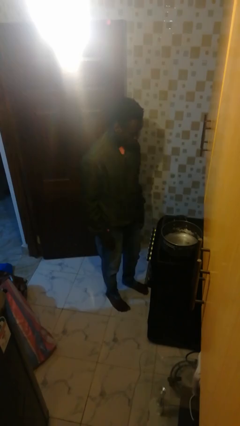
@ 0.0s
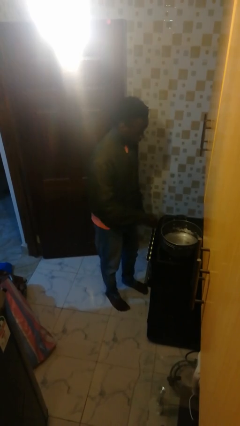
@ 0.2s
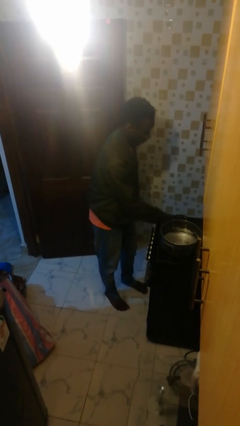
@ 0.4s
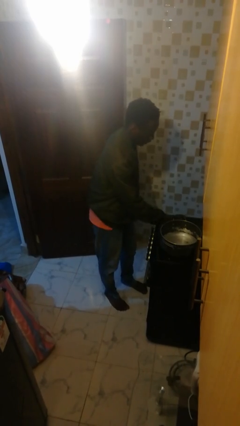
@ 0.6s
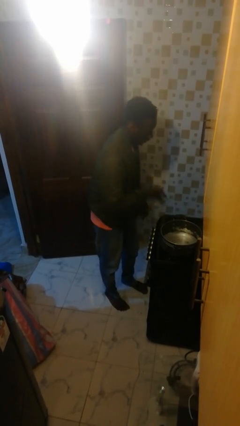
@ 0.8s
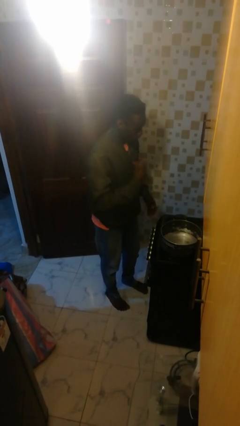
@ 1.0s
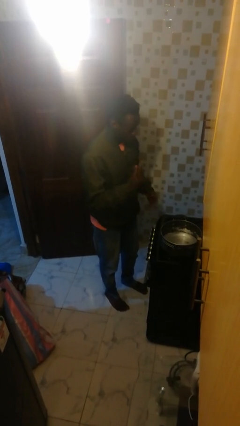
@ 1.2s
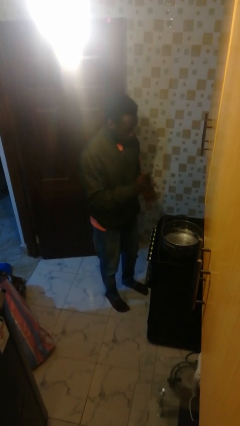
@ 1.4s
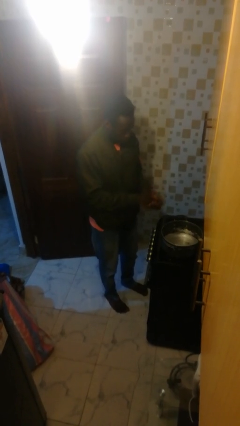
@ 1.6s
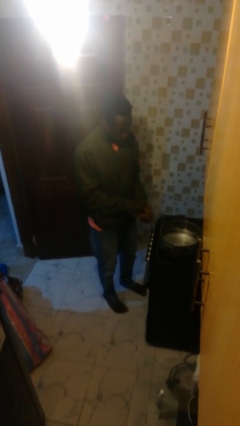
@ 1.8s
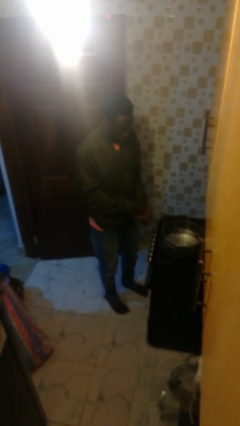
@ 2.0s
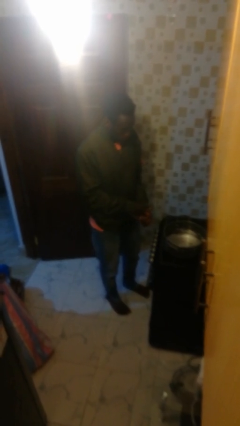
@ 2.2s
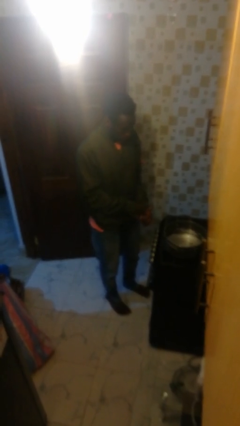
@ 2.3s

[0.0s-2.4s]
person burns hand

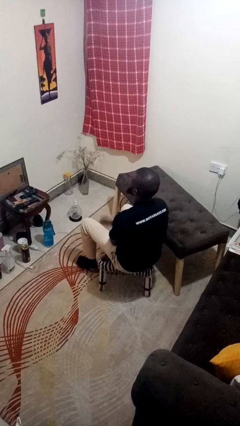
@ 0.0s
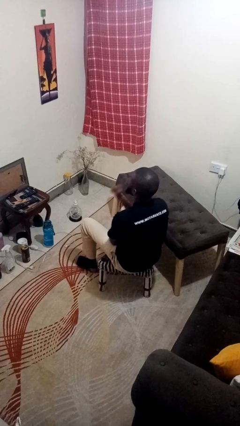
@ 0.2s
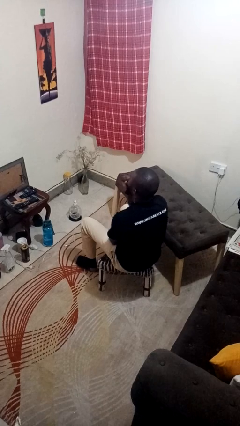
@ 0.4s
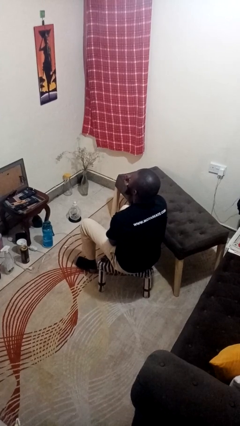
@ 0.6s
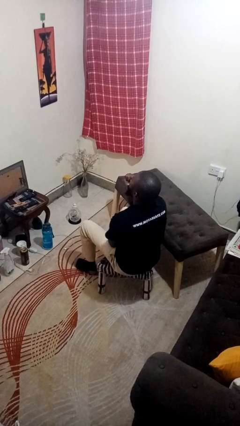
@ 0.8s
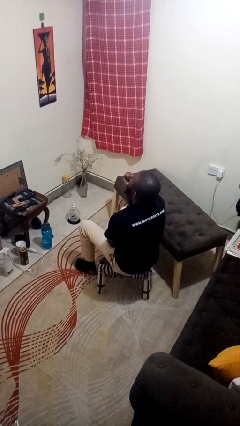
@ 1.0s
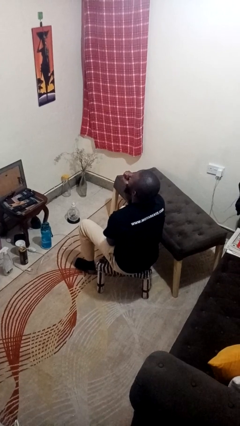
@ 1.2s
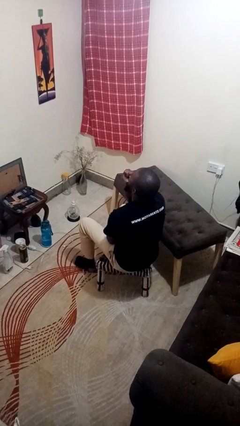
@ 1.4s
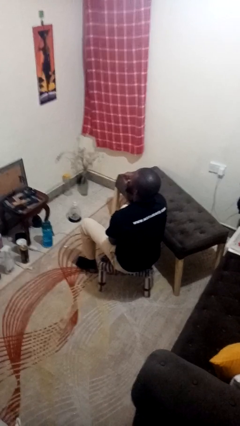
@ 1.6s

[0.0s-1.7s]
person yawns

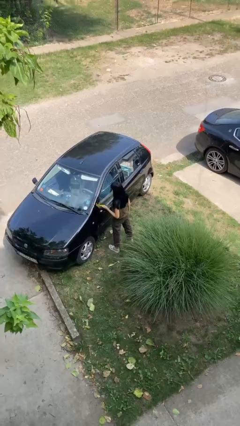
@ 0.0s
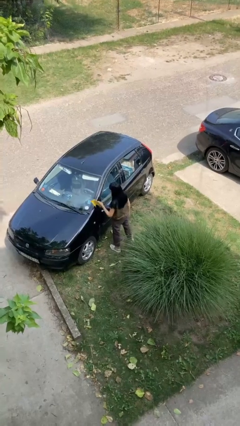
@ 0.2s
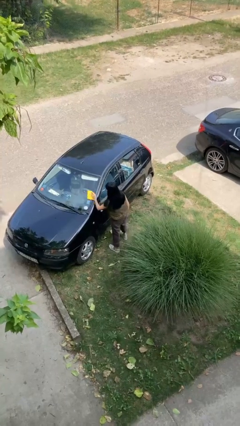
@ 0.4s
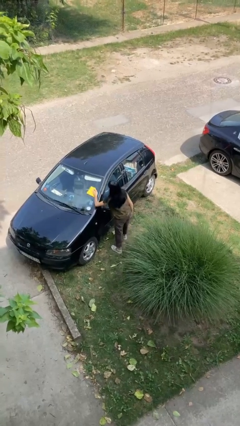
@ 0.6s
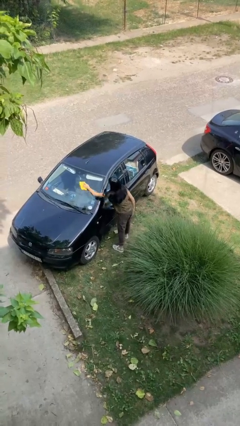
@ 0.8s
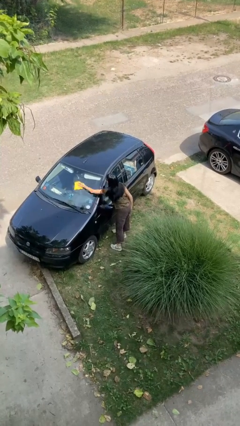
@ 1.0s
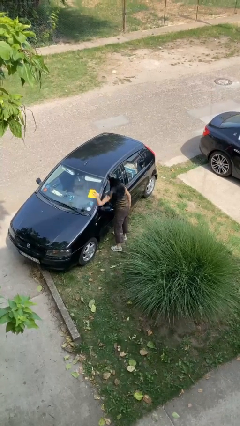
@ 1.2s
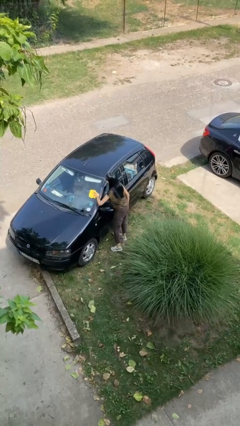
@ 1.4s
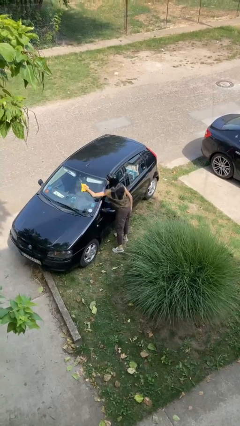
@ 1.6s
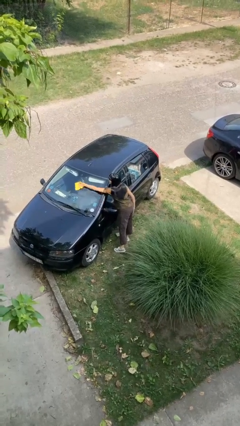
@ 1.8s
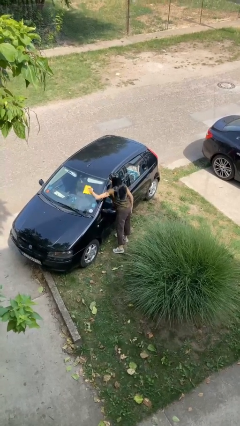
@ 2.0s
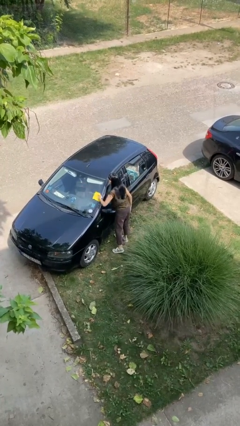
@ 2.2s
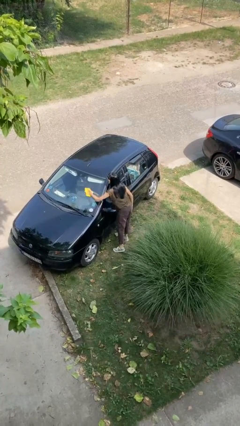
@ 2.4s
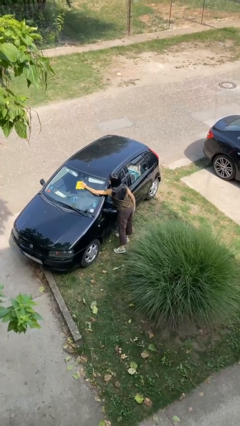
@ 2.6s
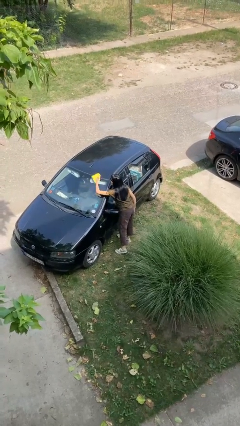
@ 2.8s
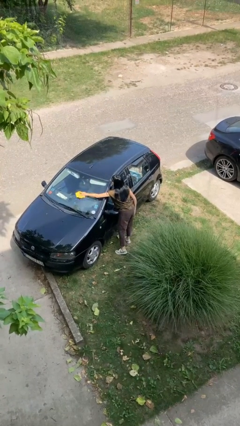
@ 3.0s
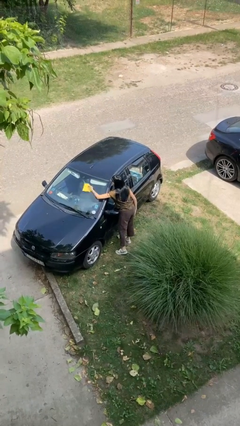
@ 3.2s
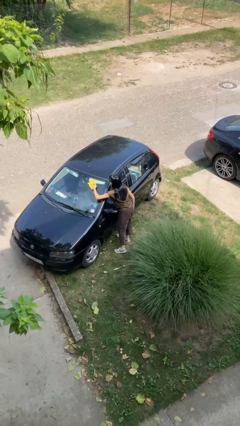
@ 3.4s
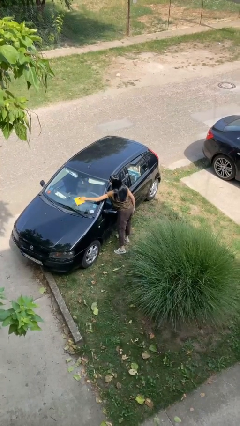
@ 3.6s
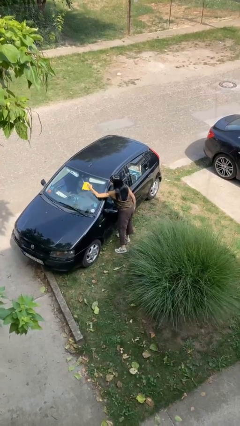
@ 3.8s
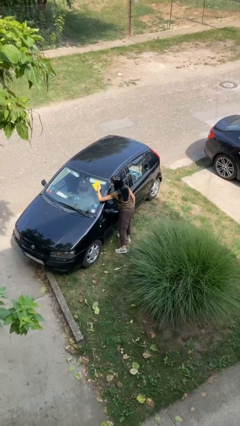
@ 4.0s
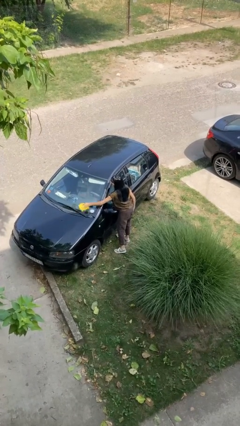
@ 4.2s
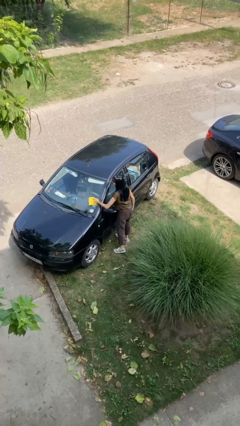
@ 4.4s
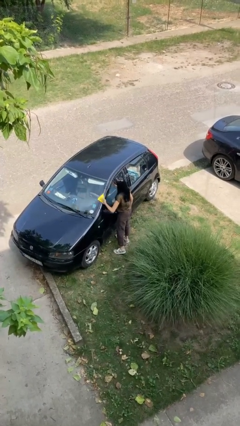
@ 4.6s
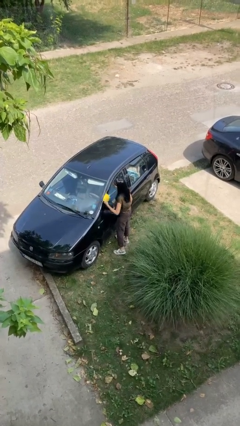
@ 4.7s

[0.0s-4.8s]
person polishes car with rag

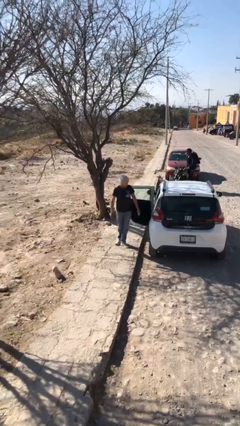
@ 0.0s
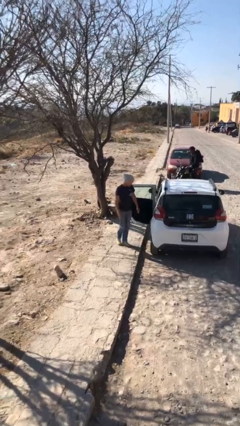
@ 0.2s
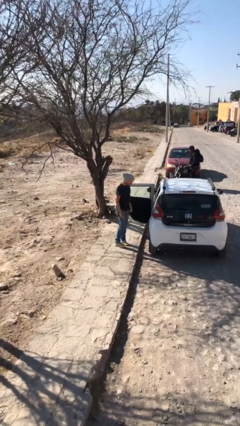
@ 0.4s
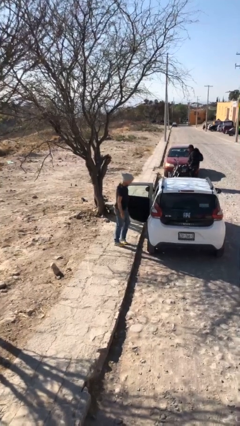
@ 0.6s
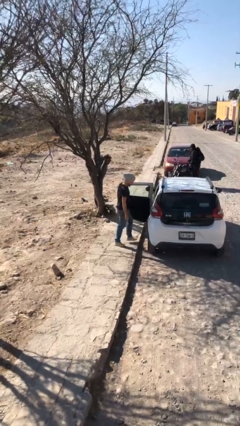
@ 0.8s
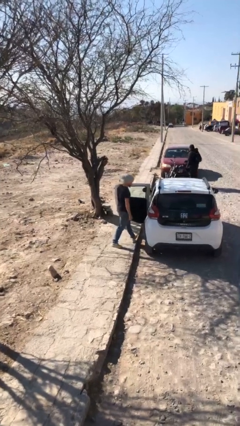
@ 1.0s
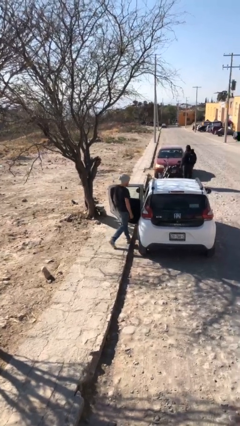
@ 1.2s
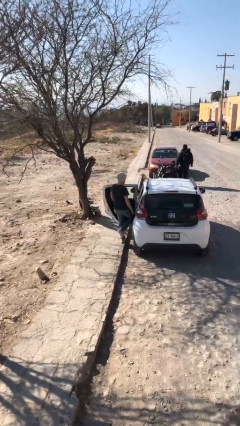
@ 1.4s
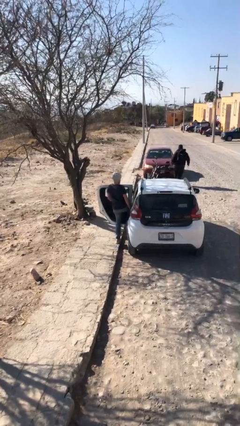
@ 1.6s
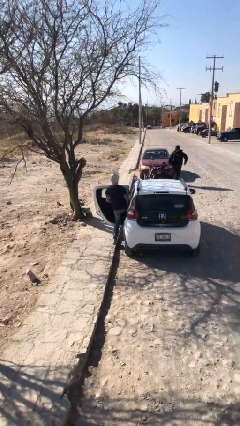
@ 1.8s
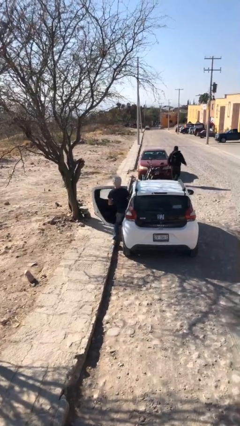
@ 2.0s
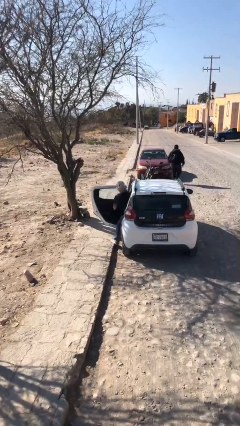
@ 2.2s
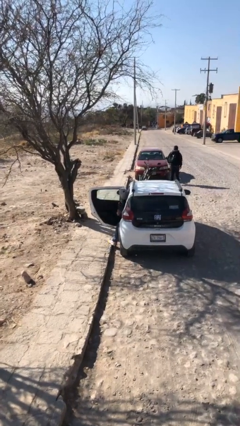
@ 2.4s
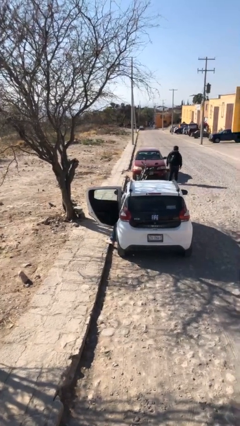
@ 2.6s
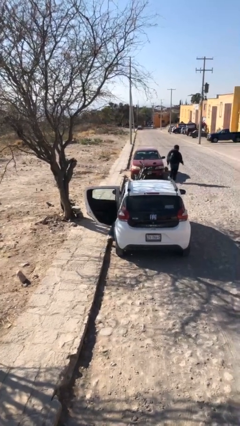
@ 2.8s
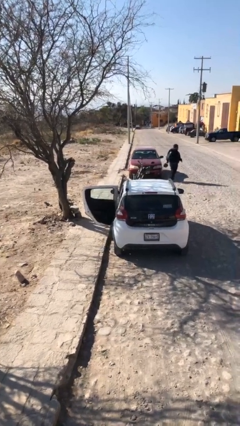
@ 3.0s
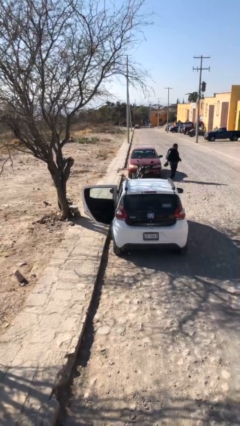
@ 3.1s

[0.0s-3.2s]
person enters car

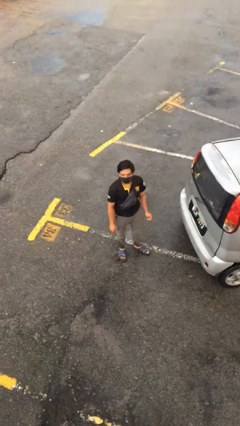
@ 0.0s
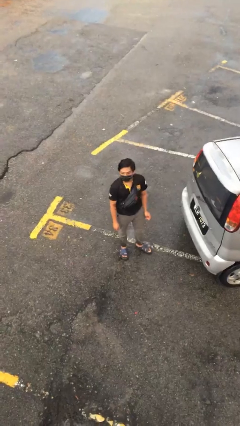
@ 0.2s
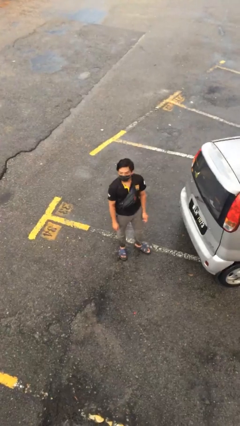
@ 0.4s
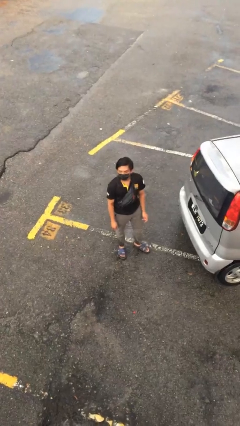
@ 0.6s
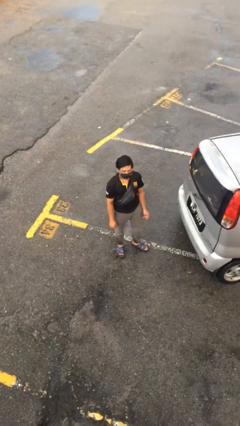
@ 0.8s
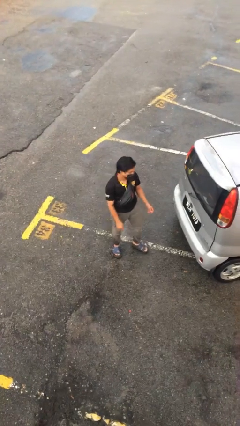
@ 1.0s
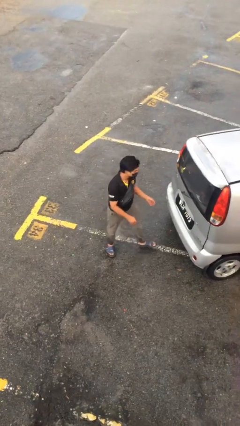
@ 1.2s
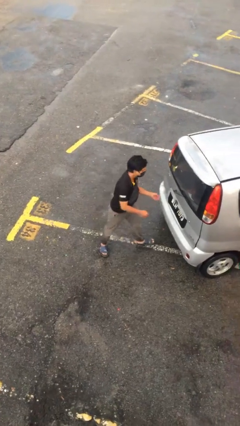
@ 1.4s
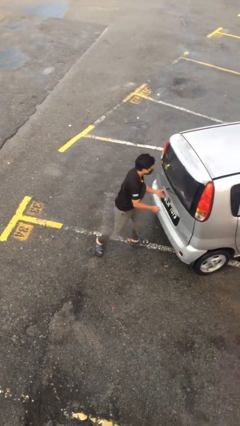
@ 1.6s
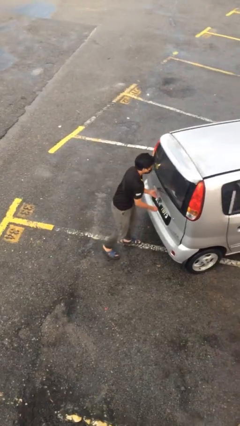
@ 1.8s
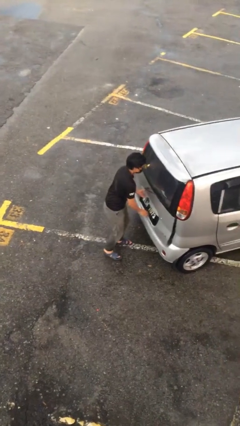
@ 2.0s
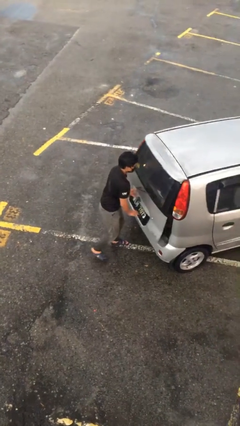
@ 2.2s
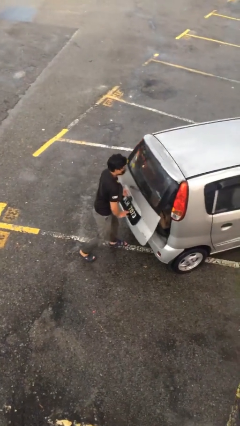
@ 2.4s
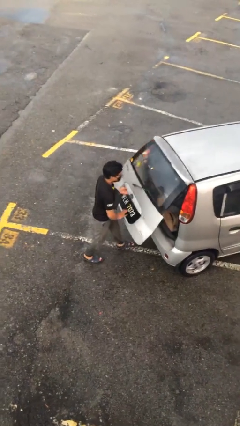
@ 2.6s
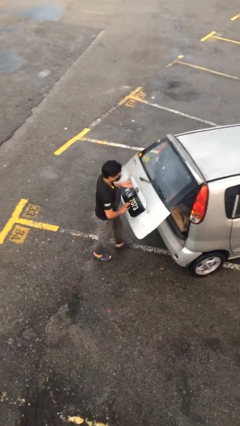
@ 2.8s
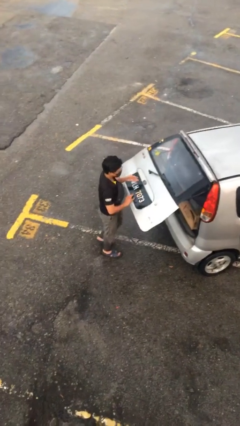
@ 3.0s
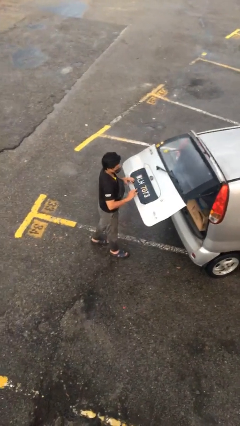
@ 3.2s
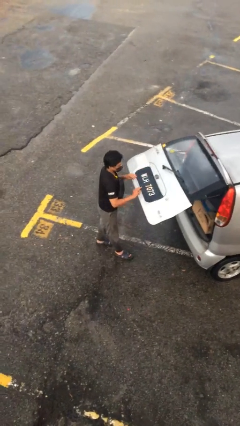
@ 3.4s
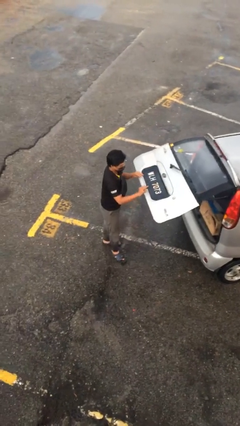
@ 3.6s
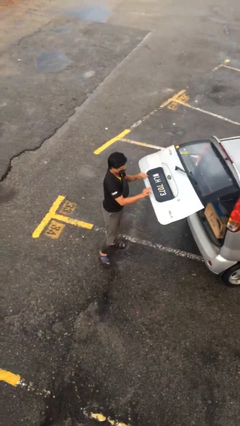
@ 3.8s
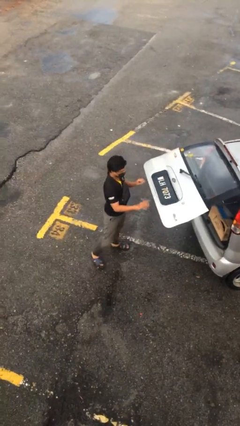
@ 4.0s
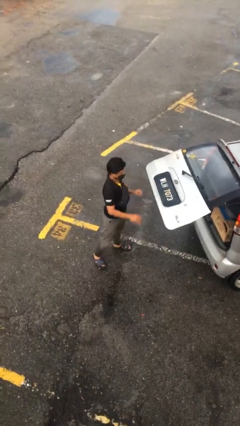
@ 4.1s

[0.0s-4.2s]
person opens car trunk

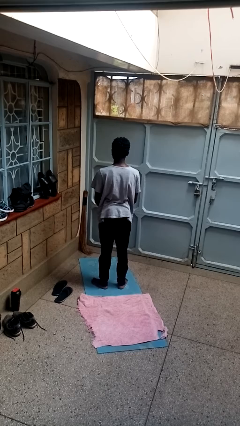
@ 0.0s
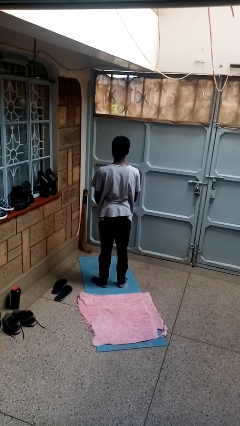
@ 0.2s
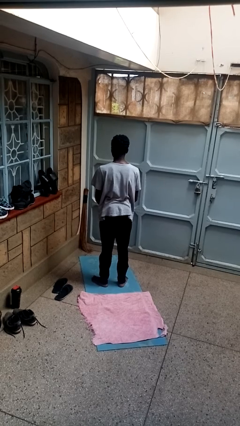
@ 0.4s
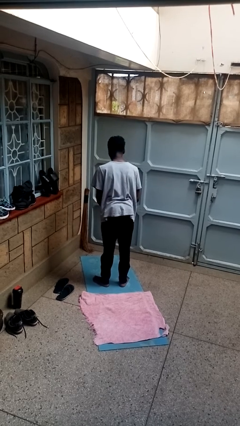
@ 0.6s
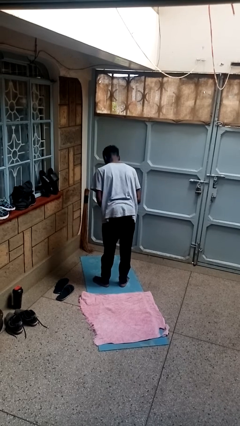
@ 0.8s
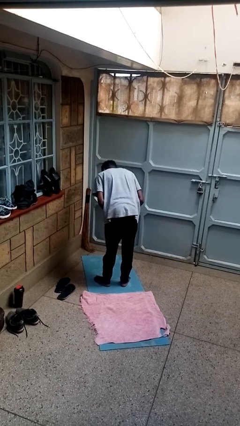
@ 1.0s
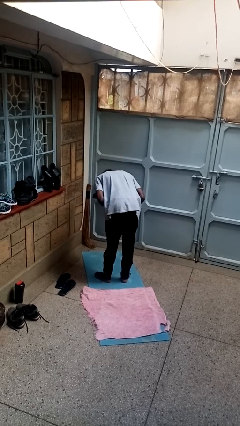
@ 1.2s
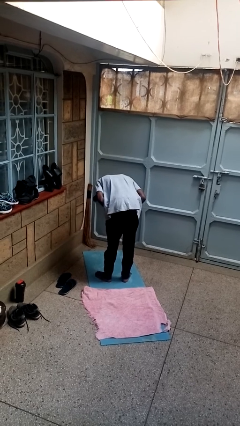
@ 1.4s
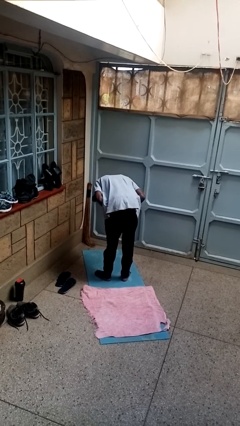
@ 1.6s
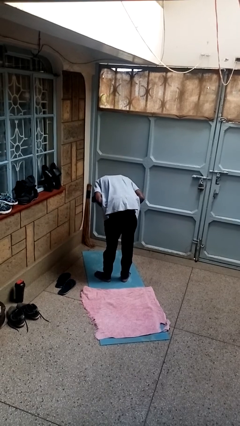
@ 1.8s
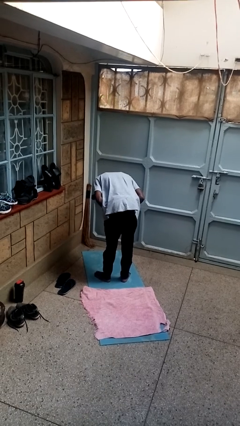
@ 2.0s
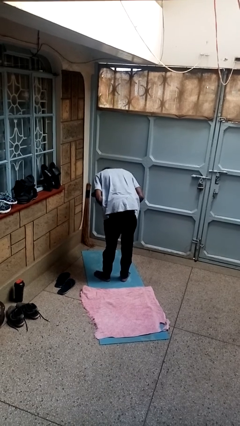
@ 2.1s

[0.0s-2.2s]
person bows
